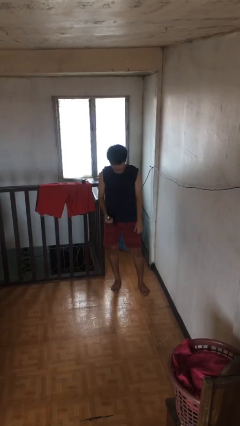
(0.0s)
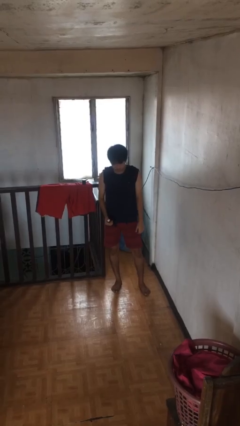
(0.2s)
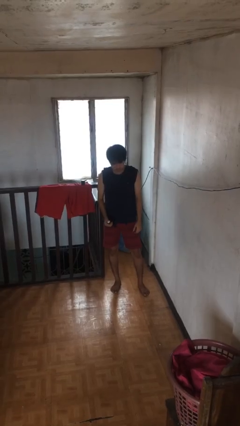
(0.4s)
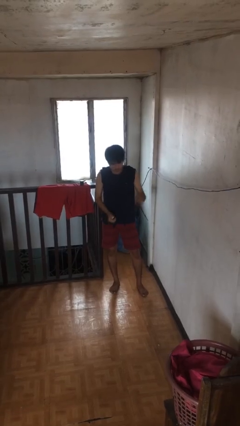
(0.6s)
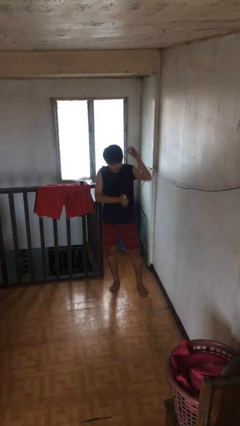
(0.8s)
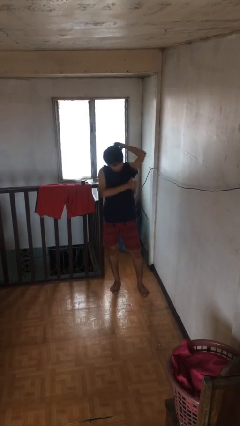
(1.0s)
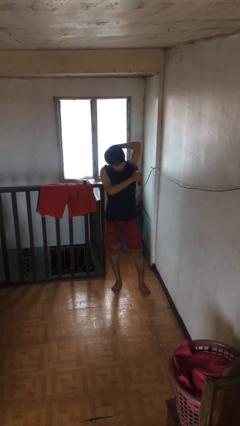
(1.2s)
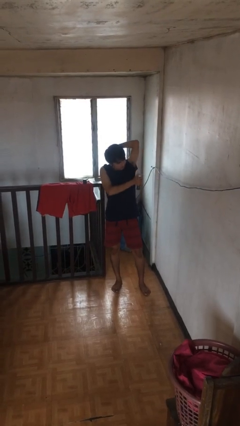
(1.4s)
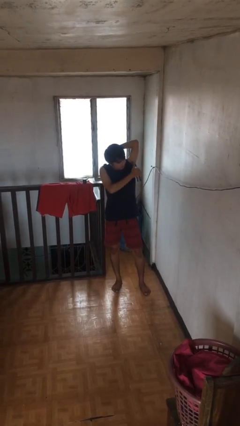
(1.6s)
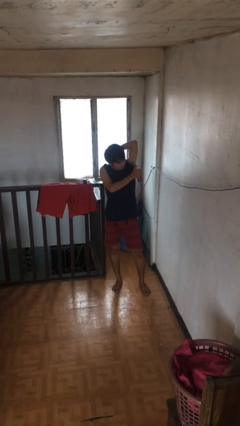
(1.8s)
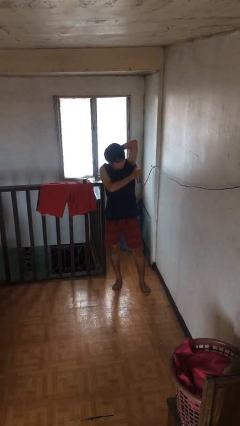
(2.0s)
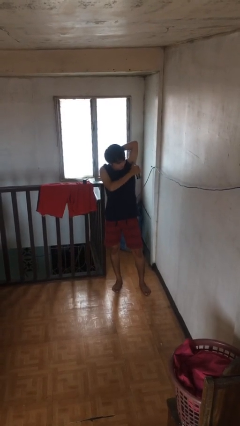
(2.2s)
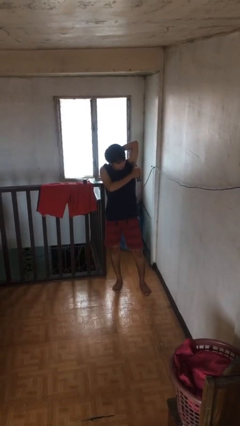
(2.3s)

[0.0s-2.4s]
person applies deodorant

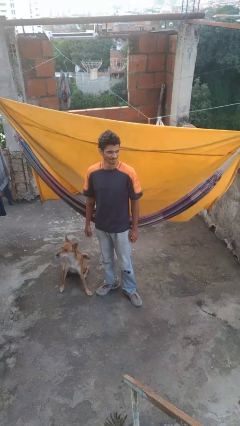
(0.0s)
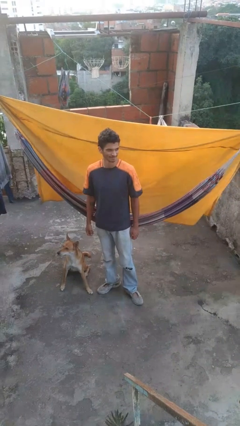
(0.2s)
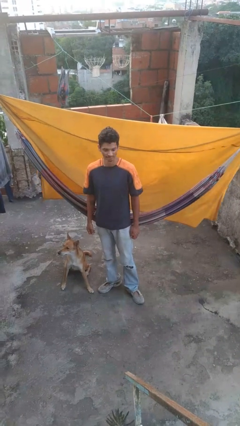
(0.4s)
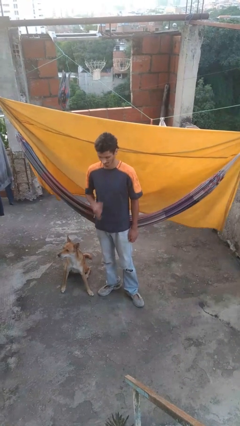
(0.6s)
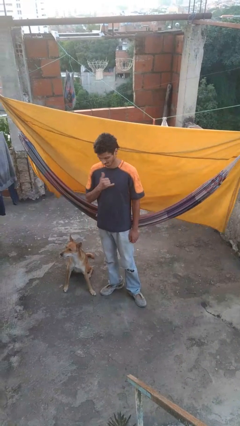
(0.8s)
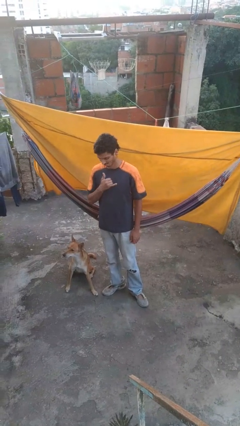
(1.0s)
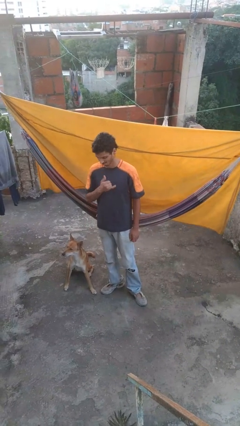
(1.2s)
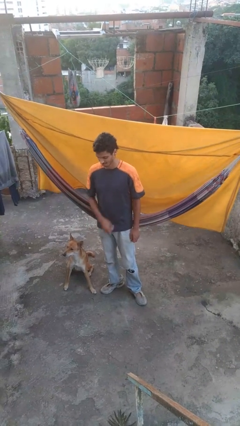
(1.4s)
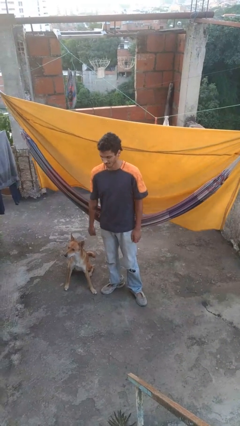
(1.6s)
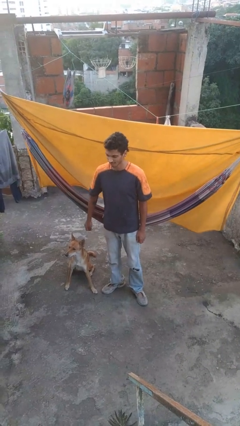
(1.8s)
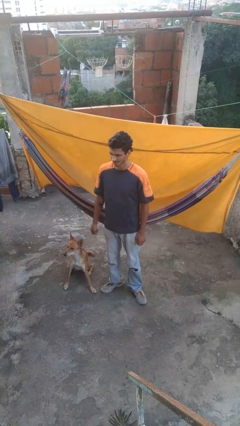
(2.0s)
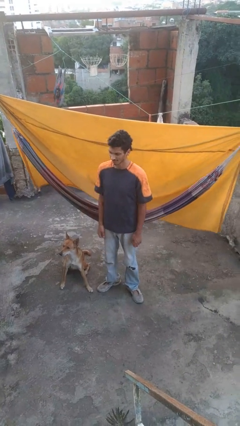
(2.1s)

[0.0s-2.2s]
person gestures hang loose

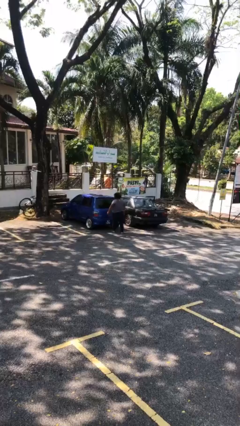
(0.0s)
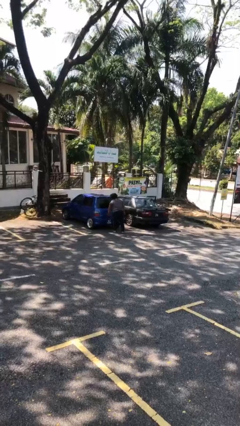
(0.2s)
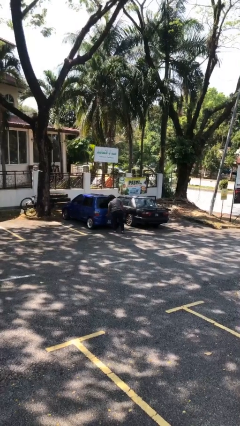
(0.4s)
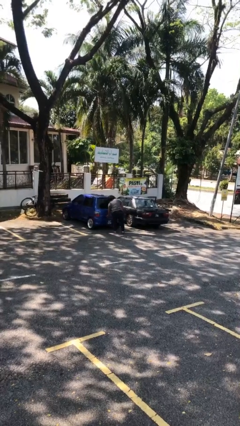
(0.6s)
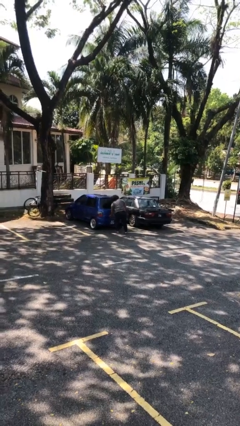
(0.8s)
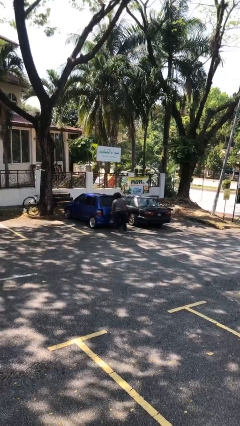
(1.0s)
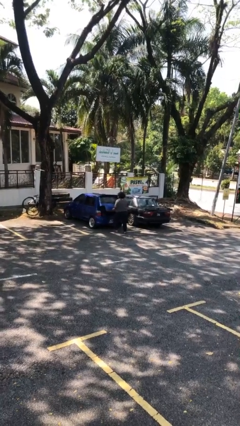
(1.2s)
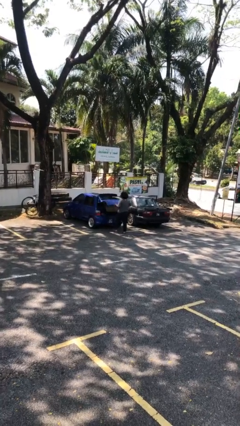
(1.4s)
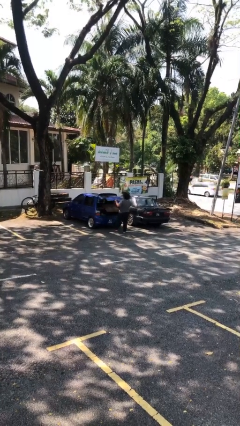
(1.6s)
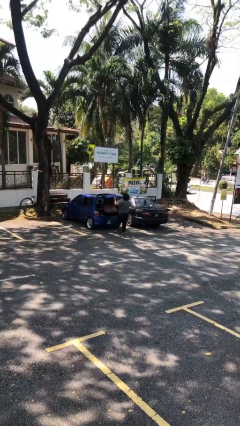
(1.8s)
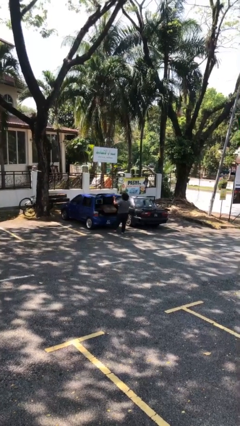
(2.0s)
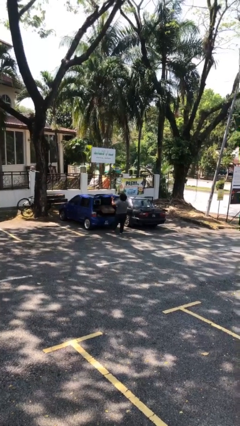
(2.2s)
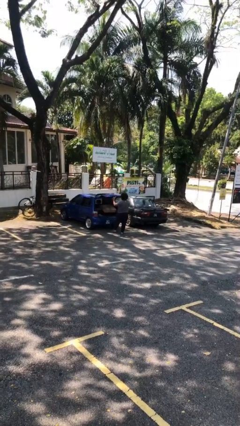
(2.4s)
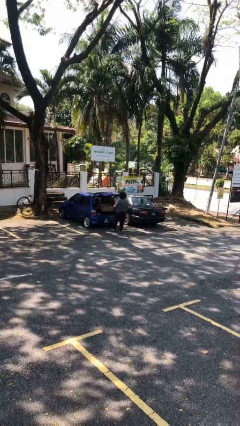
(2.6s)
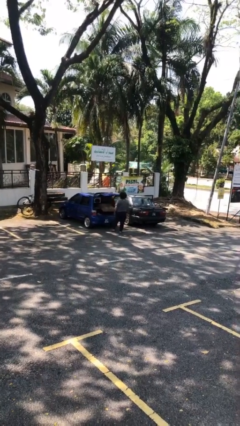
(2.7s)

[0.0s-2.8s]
person opens car trunk

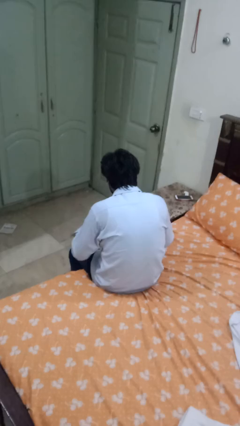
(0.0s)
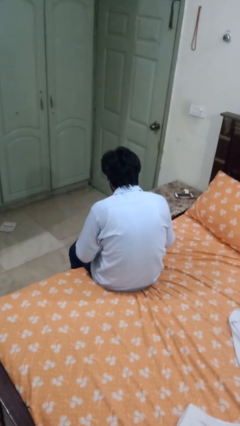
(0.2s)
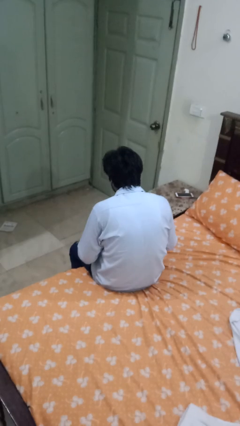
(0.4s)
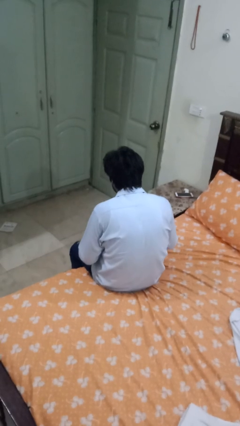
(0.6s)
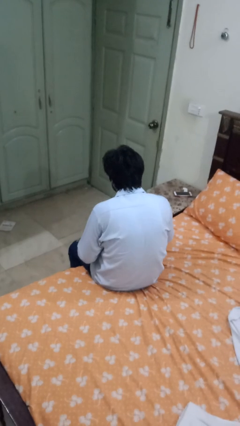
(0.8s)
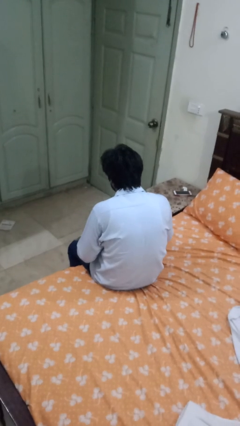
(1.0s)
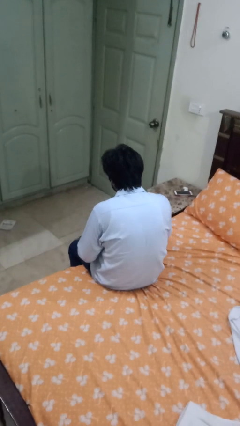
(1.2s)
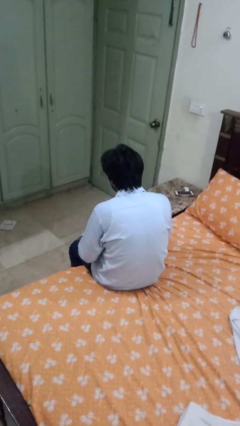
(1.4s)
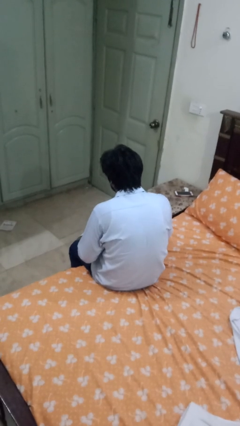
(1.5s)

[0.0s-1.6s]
person stirs mug

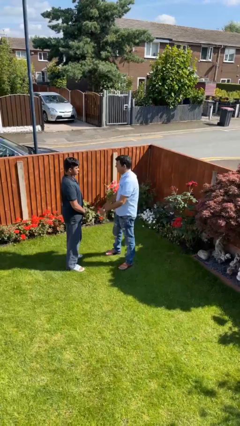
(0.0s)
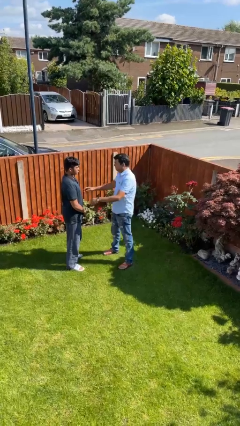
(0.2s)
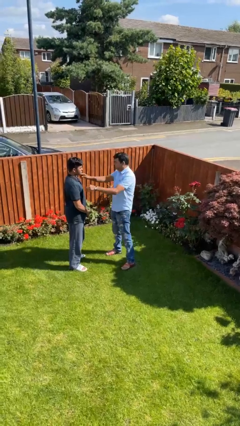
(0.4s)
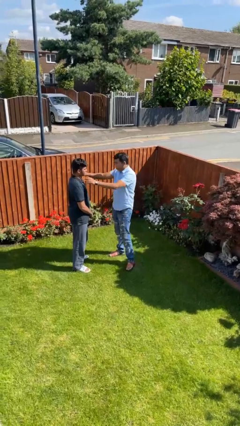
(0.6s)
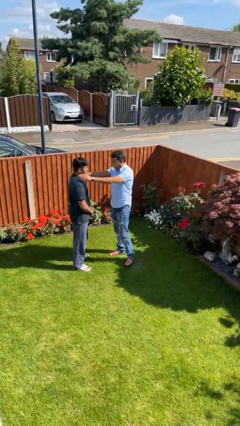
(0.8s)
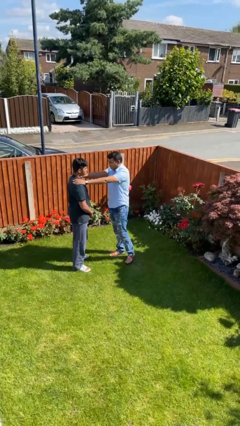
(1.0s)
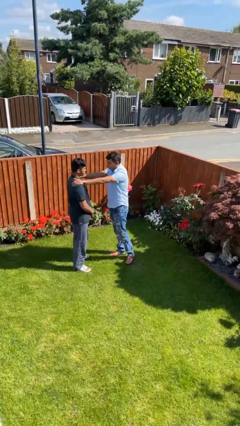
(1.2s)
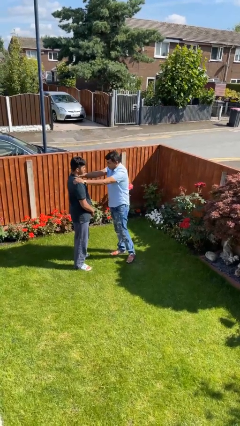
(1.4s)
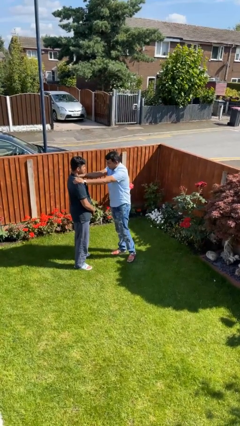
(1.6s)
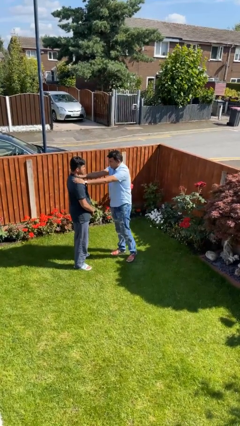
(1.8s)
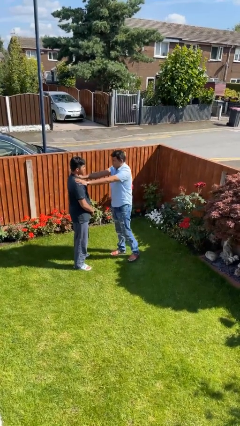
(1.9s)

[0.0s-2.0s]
person pounds shoulders of person

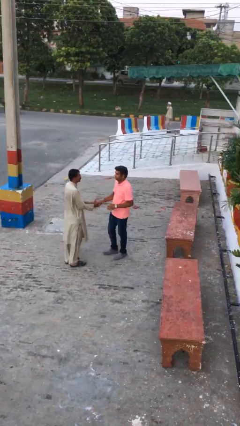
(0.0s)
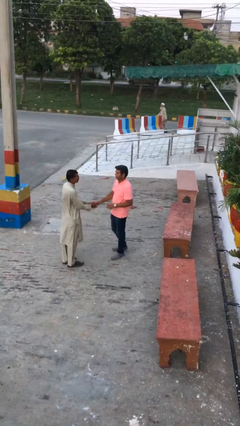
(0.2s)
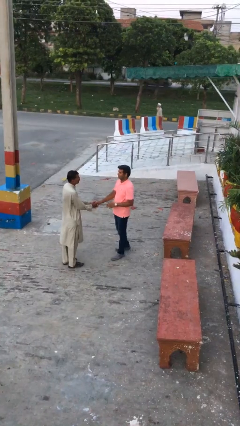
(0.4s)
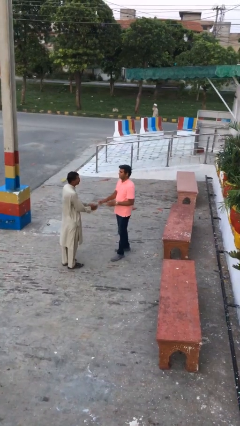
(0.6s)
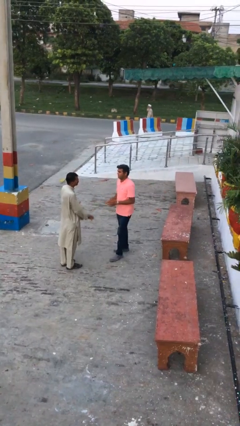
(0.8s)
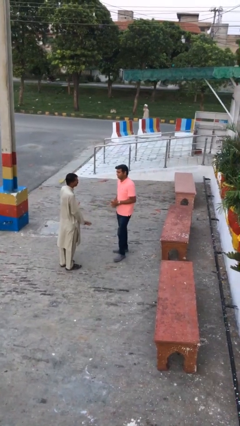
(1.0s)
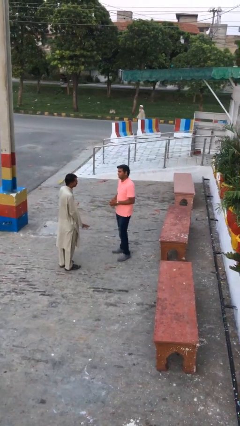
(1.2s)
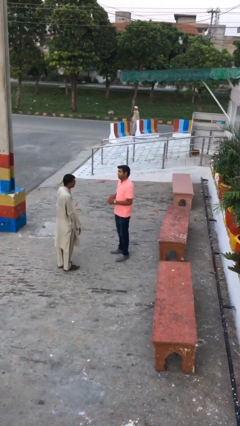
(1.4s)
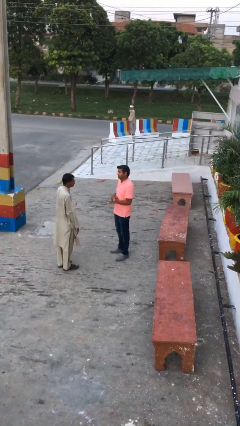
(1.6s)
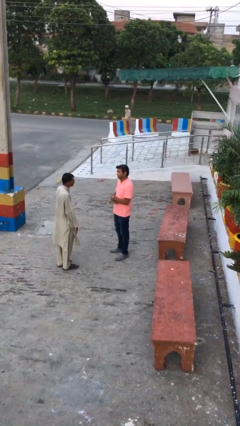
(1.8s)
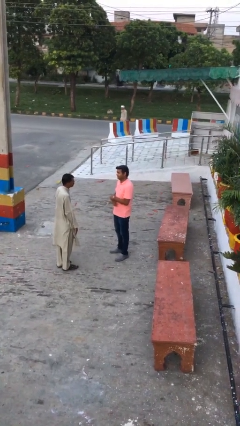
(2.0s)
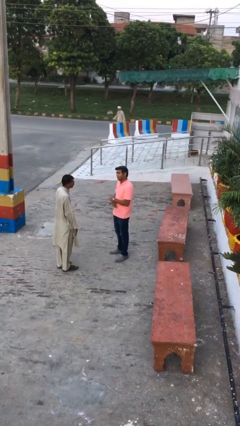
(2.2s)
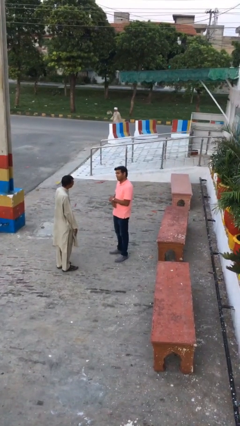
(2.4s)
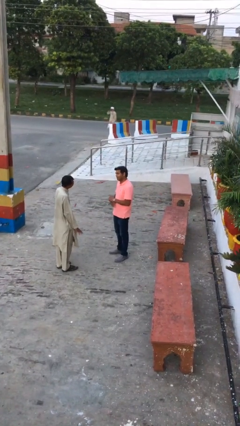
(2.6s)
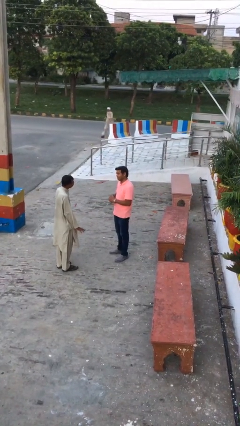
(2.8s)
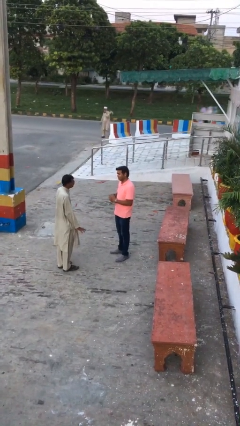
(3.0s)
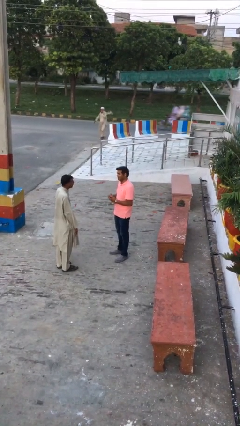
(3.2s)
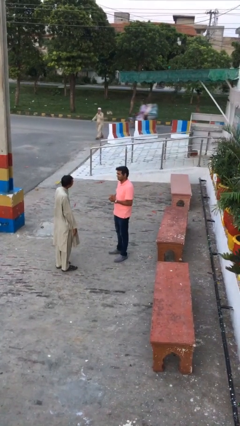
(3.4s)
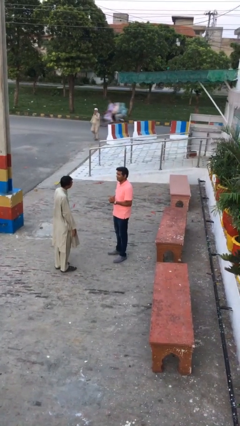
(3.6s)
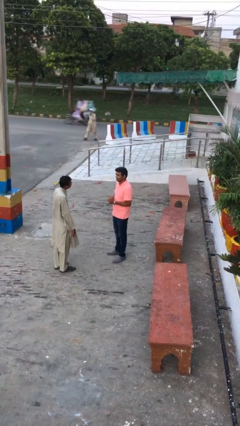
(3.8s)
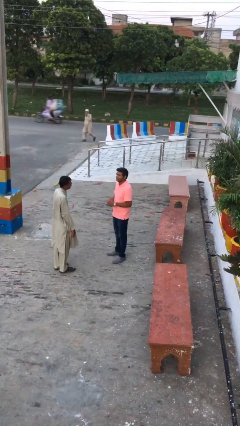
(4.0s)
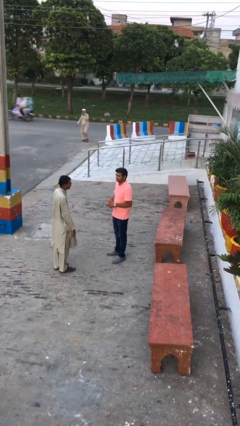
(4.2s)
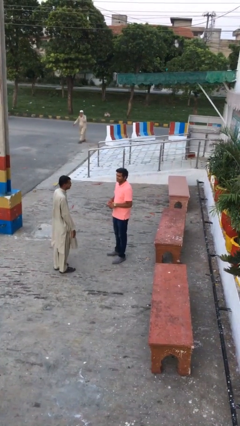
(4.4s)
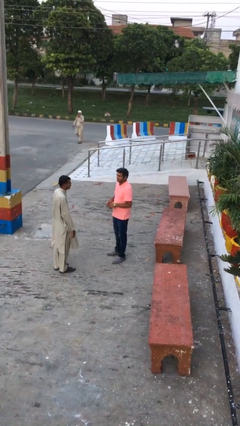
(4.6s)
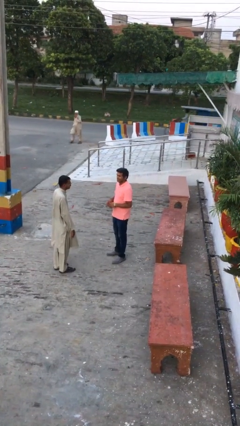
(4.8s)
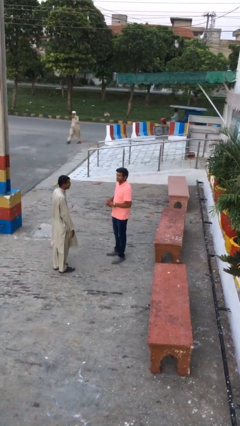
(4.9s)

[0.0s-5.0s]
person talks to person

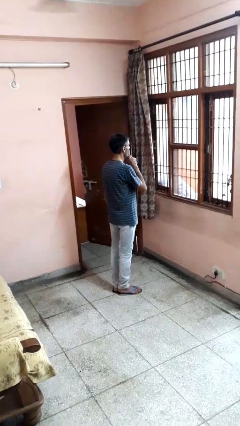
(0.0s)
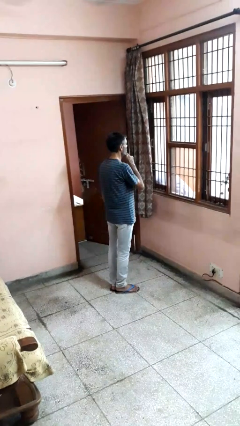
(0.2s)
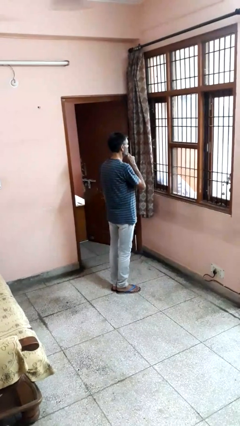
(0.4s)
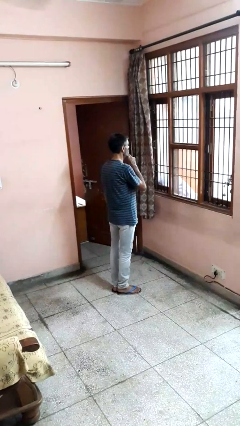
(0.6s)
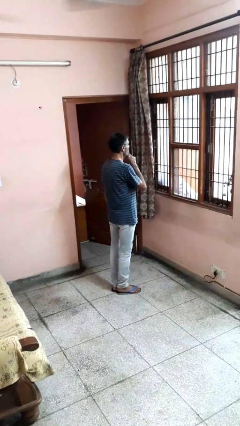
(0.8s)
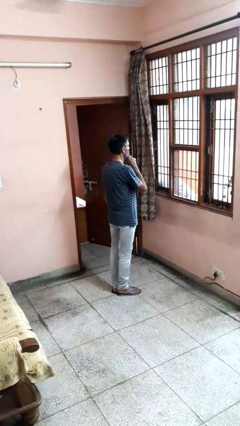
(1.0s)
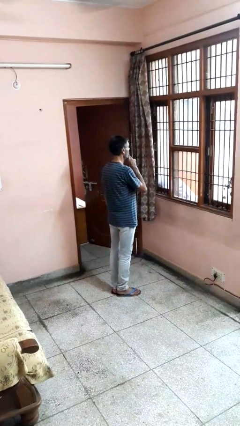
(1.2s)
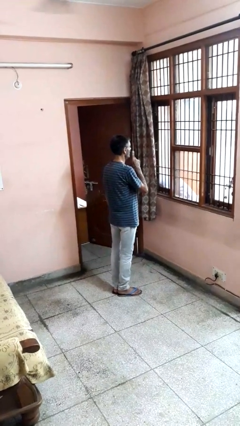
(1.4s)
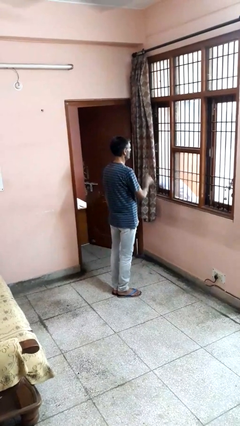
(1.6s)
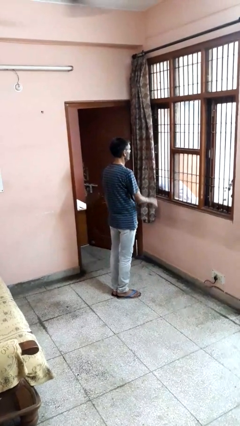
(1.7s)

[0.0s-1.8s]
person gestures be quiet
